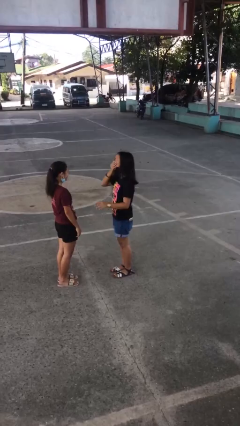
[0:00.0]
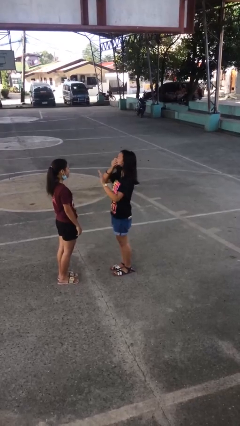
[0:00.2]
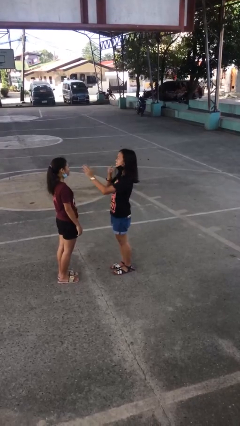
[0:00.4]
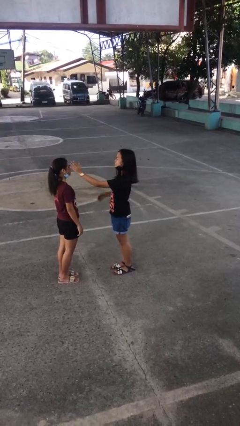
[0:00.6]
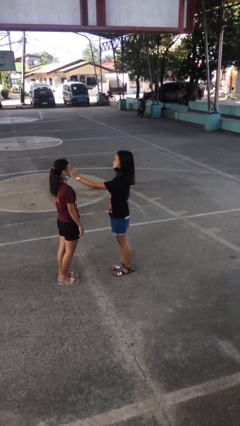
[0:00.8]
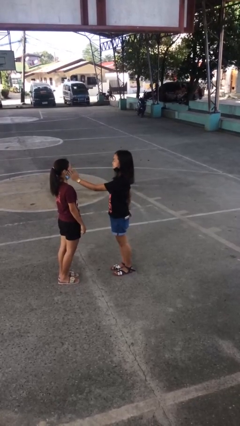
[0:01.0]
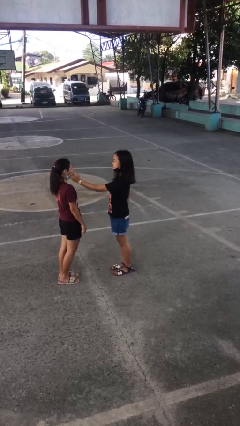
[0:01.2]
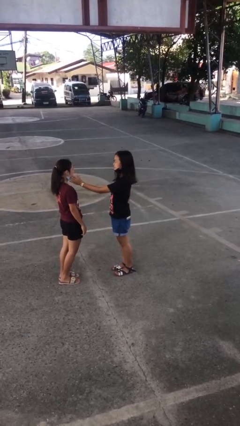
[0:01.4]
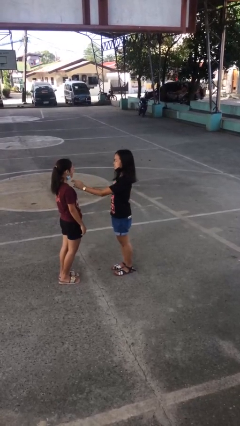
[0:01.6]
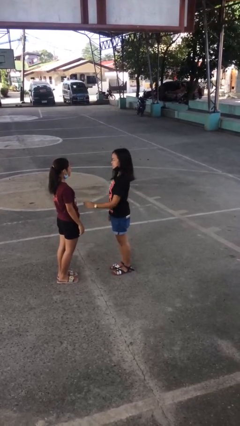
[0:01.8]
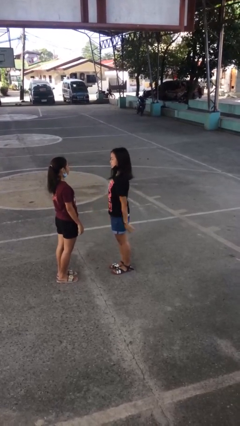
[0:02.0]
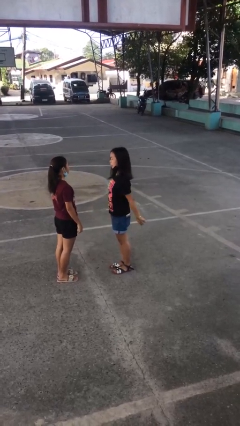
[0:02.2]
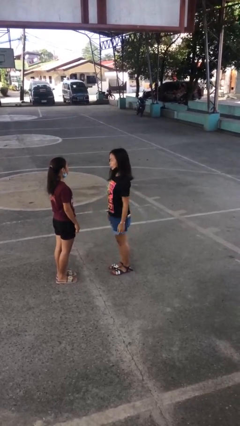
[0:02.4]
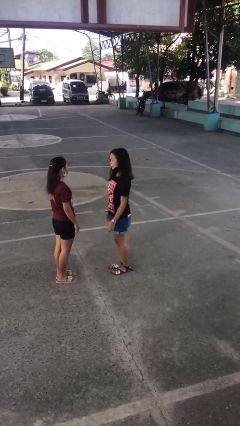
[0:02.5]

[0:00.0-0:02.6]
person touches face of person

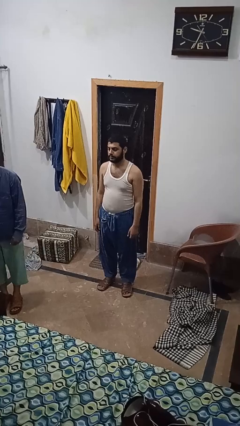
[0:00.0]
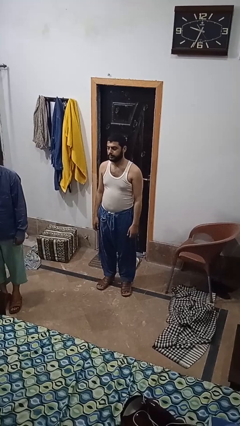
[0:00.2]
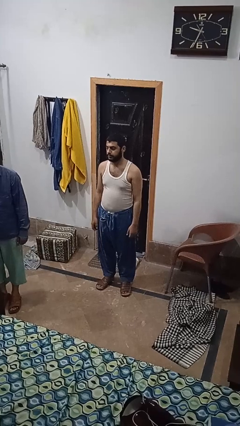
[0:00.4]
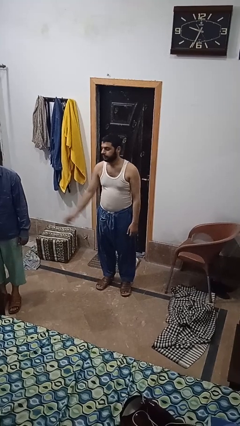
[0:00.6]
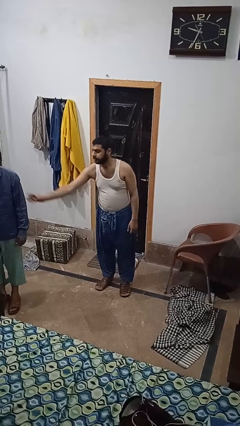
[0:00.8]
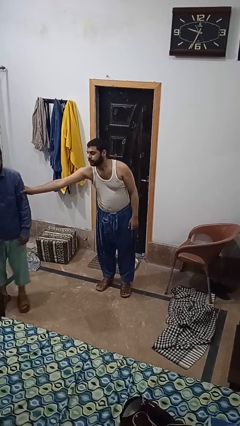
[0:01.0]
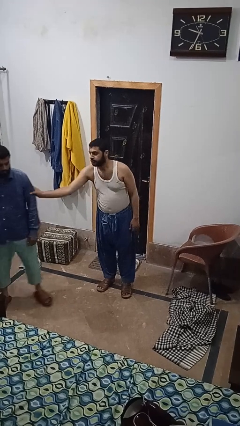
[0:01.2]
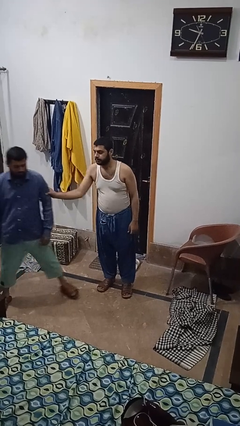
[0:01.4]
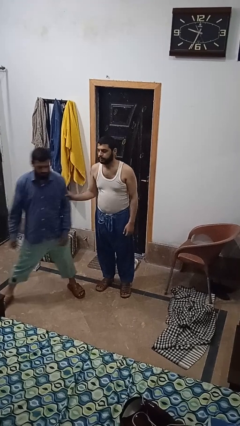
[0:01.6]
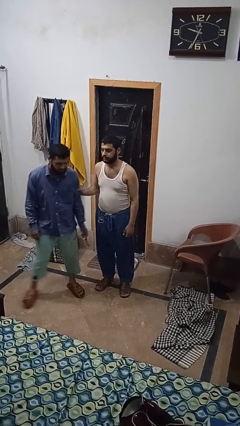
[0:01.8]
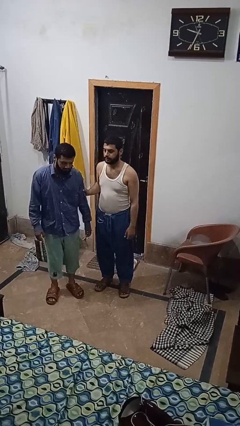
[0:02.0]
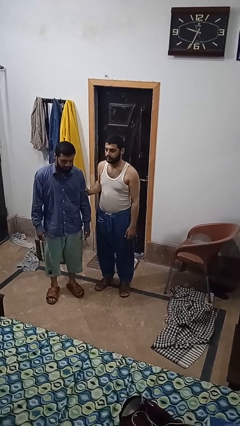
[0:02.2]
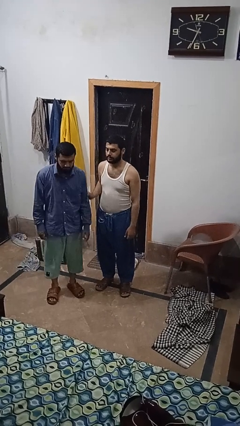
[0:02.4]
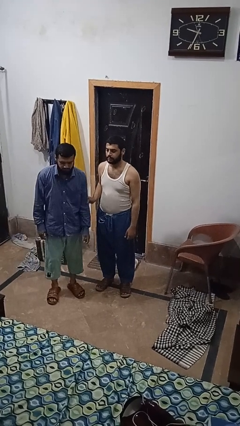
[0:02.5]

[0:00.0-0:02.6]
person grabs person by bicep

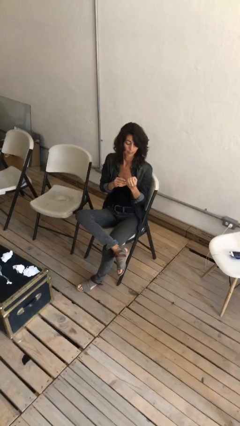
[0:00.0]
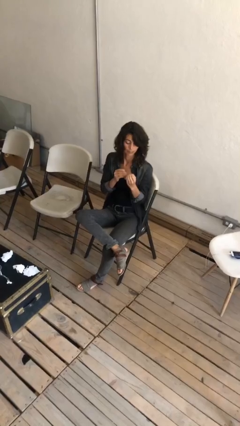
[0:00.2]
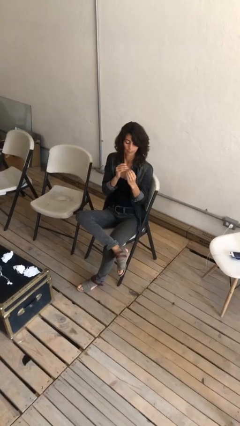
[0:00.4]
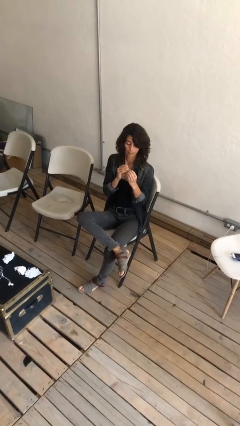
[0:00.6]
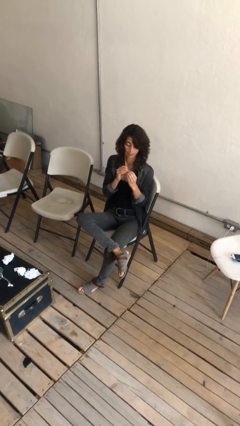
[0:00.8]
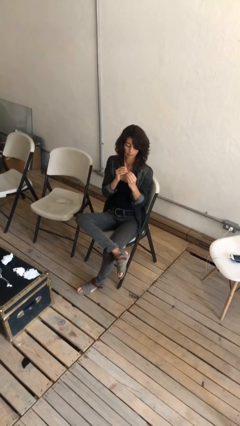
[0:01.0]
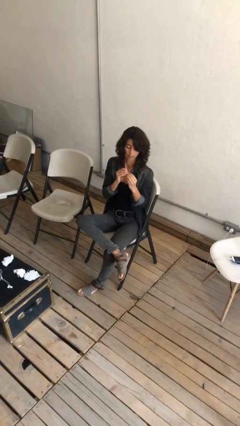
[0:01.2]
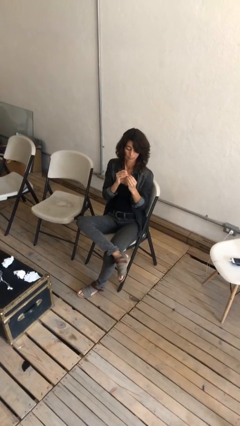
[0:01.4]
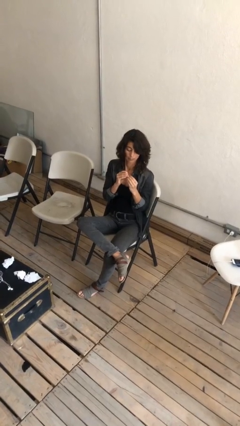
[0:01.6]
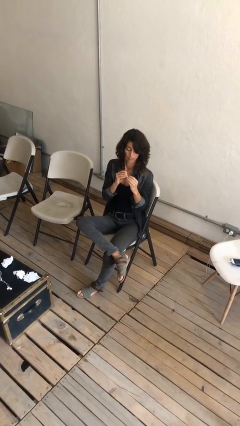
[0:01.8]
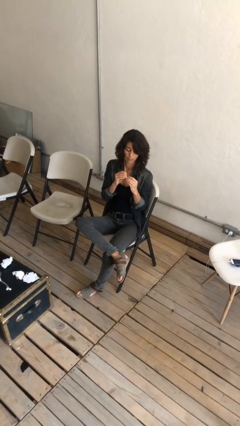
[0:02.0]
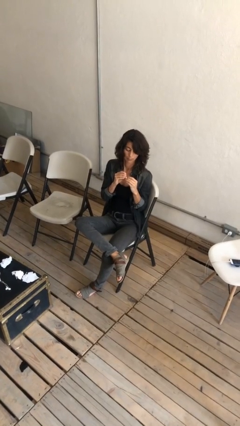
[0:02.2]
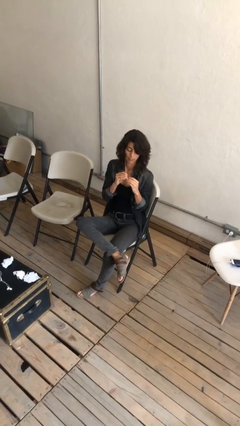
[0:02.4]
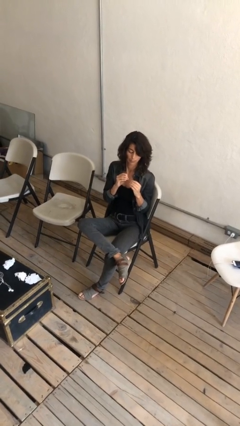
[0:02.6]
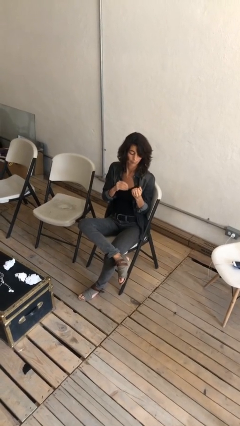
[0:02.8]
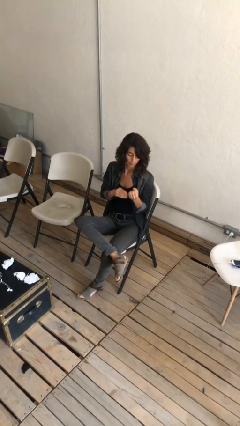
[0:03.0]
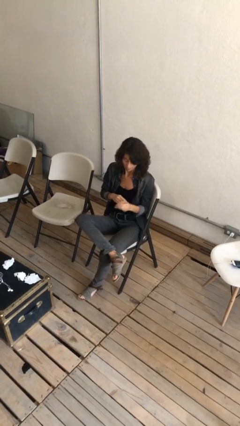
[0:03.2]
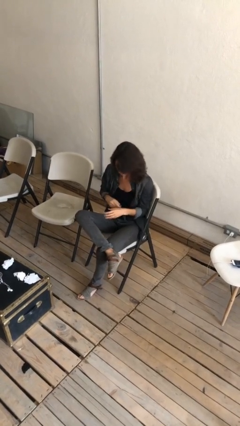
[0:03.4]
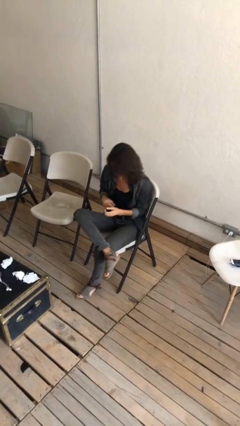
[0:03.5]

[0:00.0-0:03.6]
person clips fingernails

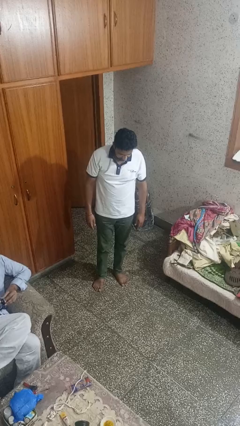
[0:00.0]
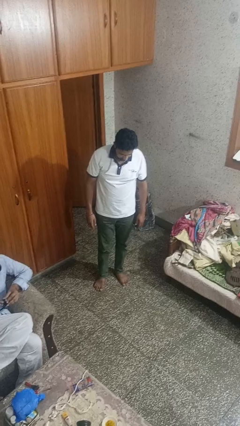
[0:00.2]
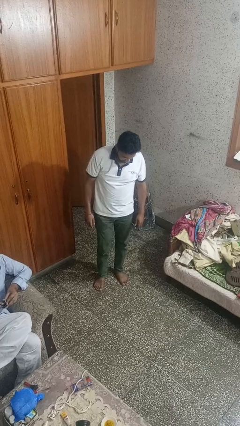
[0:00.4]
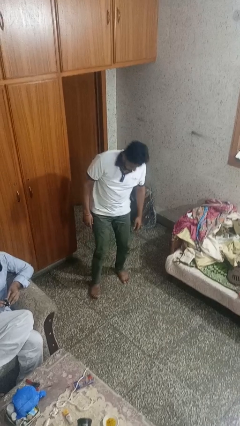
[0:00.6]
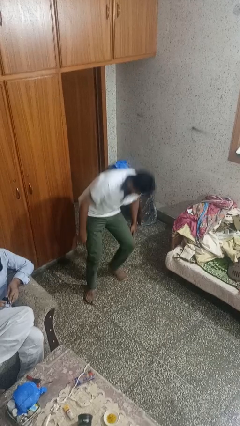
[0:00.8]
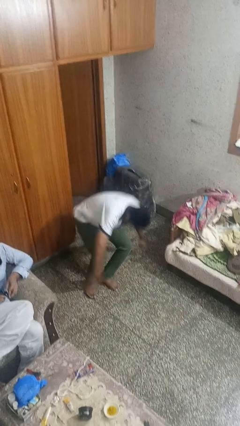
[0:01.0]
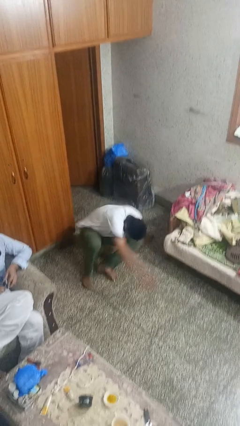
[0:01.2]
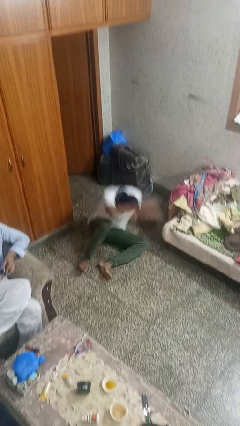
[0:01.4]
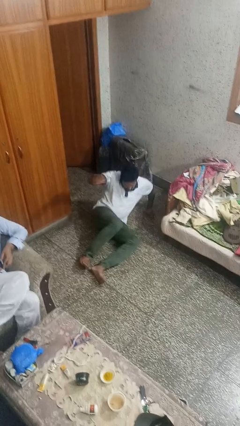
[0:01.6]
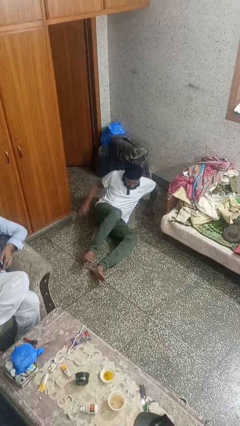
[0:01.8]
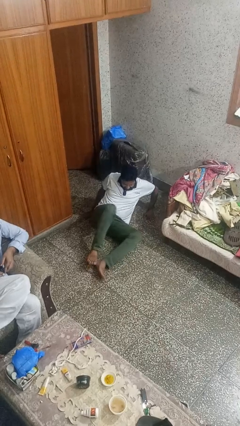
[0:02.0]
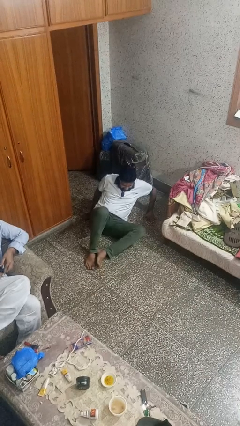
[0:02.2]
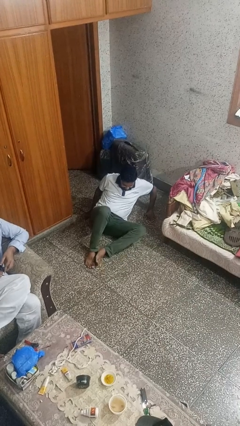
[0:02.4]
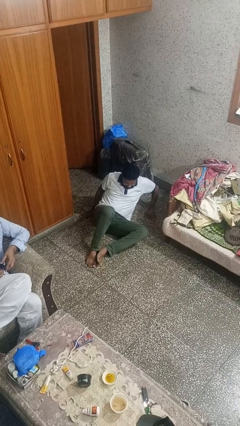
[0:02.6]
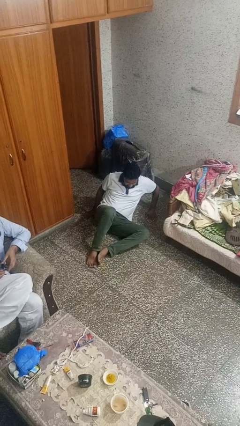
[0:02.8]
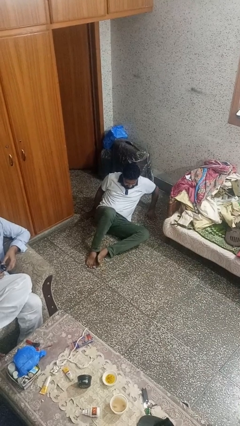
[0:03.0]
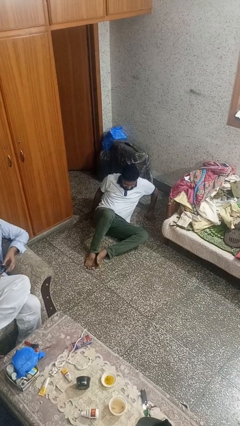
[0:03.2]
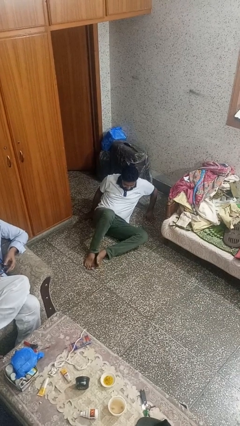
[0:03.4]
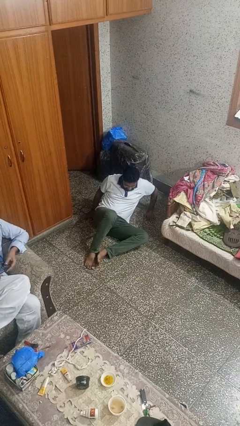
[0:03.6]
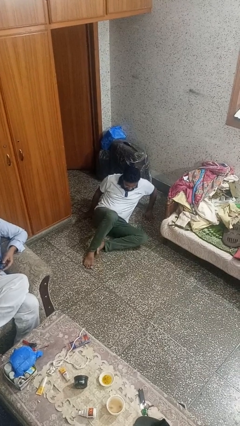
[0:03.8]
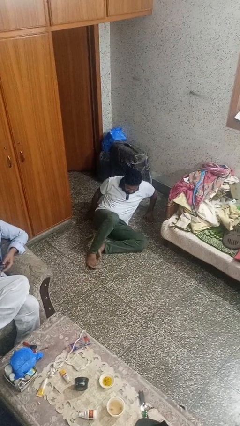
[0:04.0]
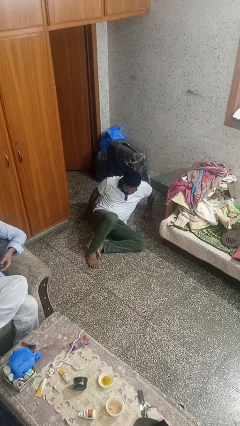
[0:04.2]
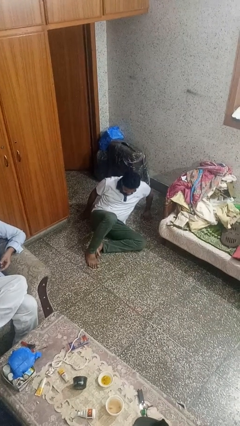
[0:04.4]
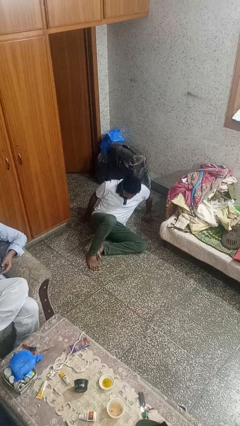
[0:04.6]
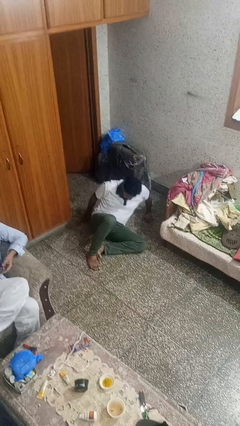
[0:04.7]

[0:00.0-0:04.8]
person falls while standing

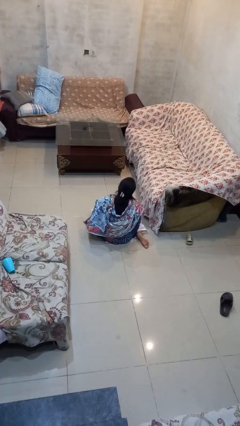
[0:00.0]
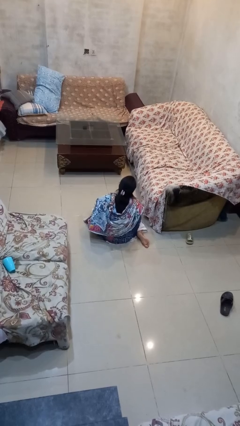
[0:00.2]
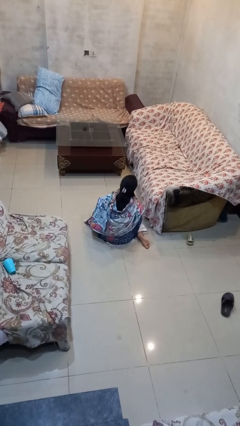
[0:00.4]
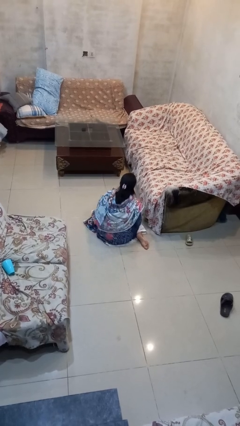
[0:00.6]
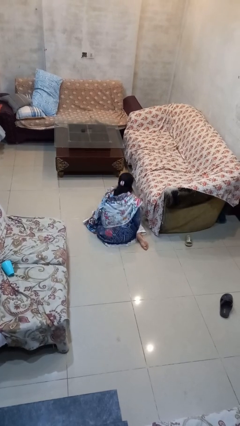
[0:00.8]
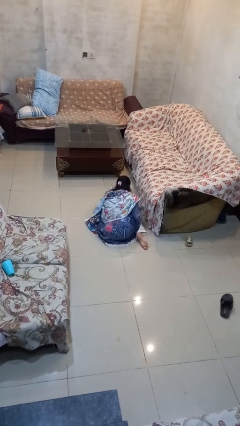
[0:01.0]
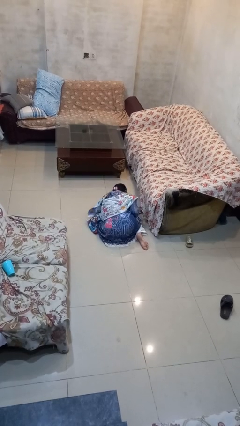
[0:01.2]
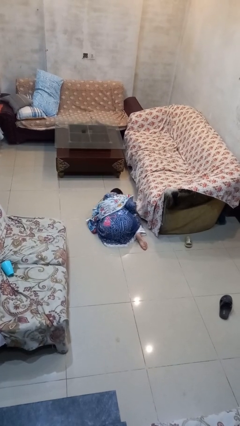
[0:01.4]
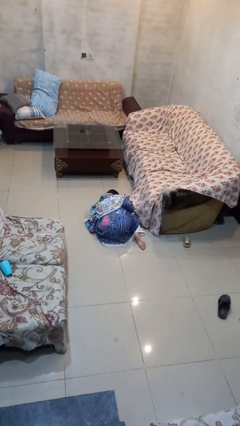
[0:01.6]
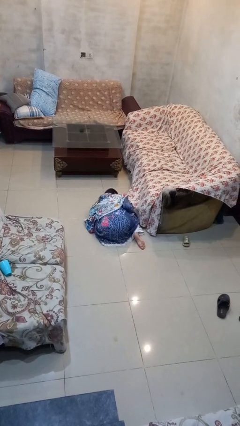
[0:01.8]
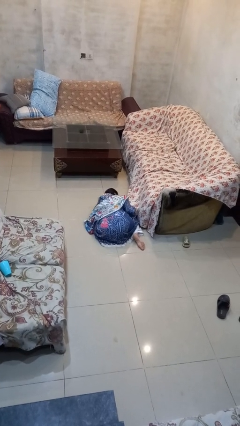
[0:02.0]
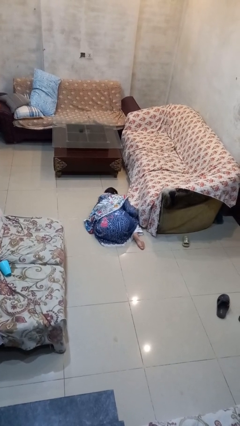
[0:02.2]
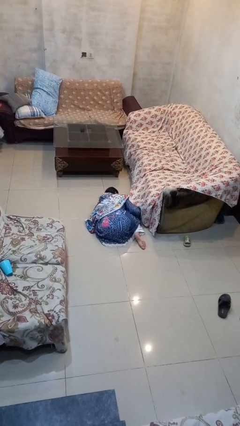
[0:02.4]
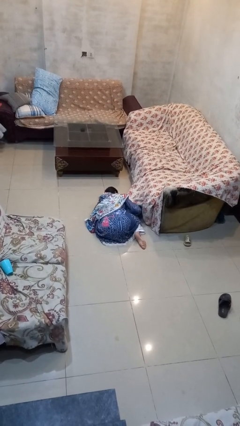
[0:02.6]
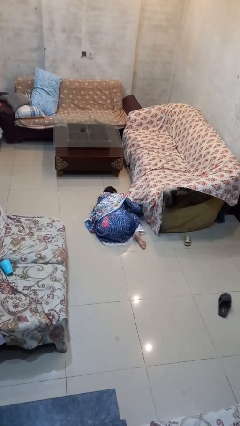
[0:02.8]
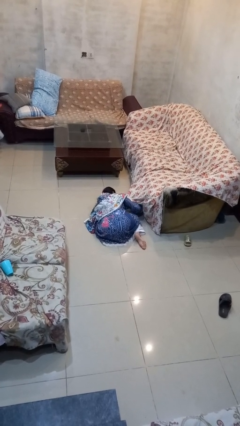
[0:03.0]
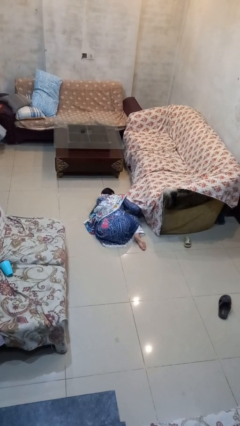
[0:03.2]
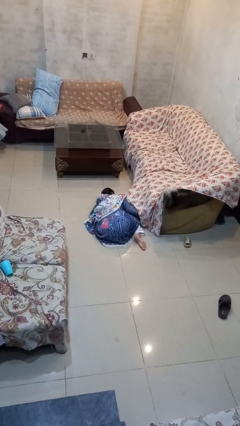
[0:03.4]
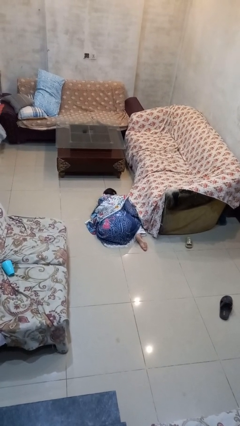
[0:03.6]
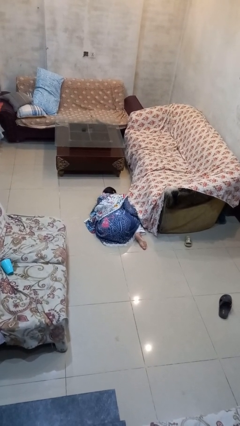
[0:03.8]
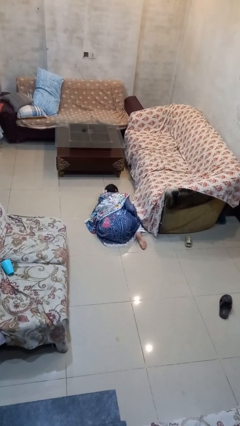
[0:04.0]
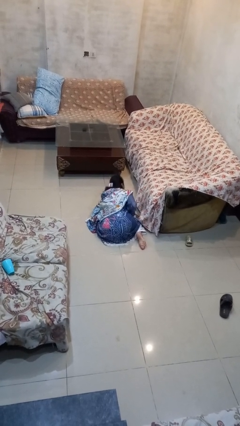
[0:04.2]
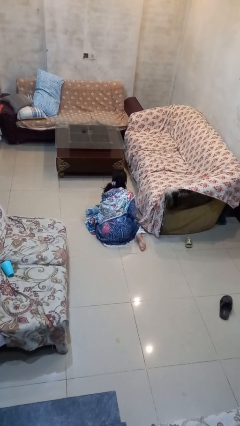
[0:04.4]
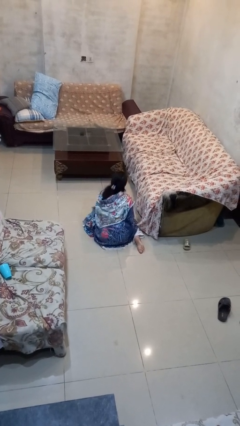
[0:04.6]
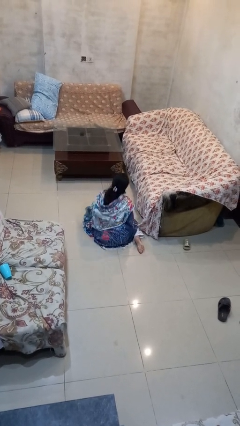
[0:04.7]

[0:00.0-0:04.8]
person searches under couch
